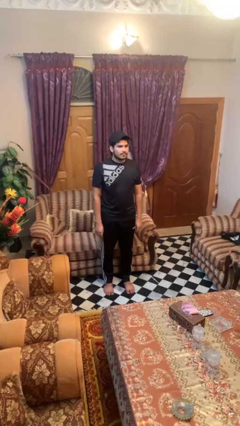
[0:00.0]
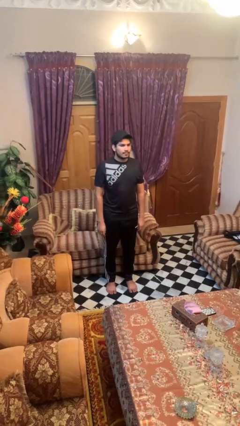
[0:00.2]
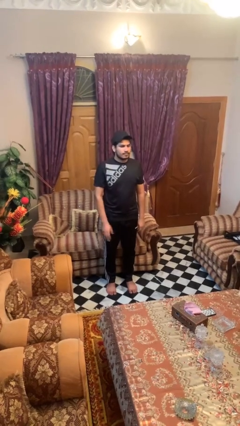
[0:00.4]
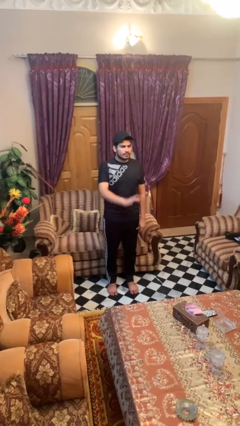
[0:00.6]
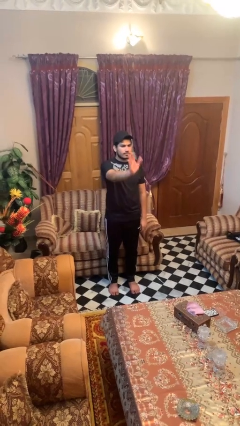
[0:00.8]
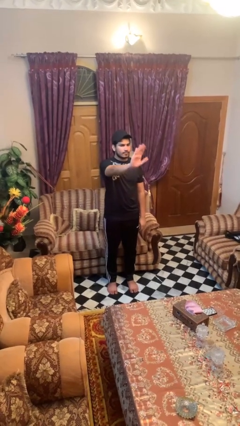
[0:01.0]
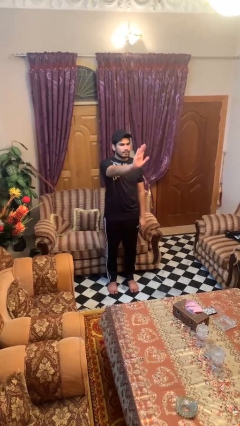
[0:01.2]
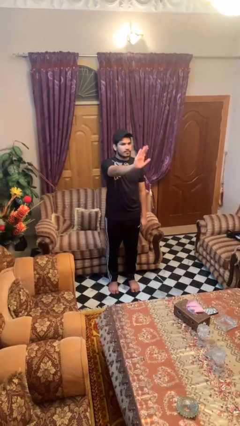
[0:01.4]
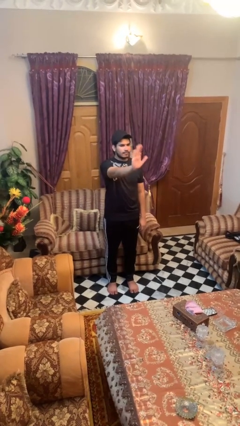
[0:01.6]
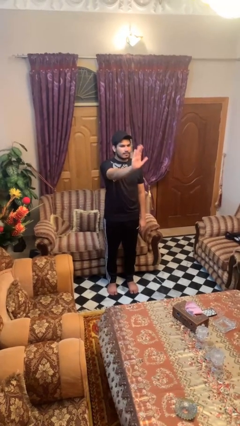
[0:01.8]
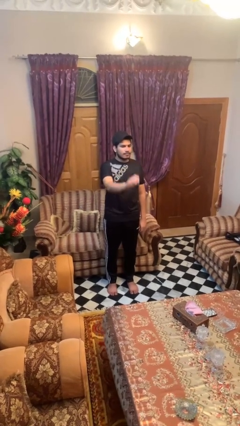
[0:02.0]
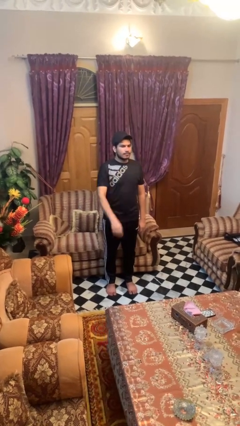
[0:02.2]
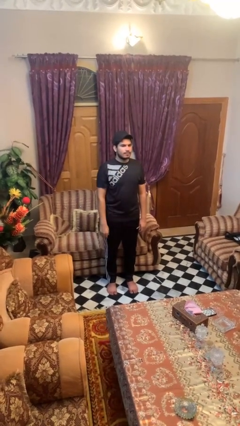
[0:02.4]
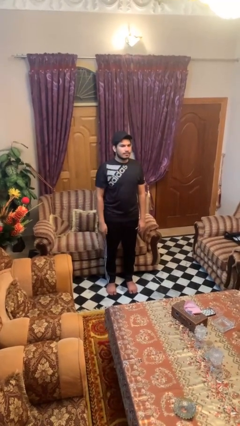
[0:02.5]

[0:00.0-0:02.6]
person waves at person

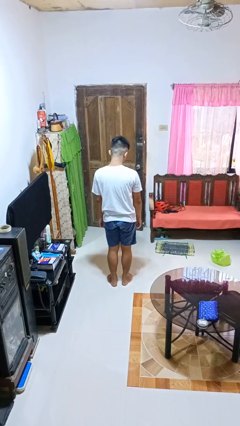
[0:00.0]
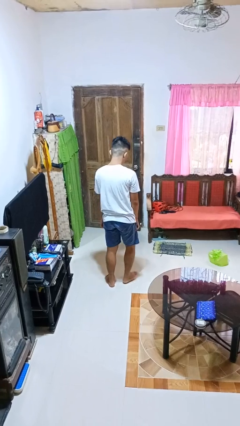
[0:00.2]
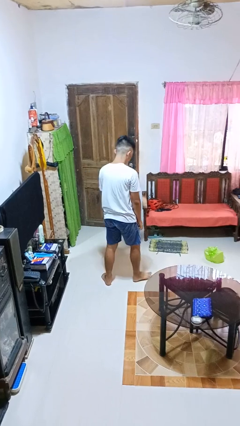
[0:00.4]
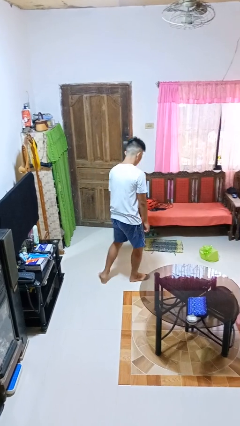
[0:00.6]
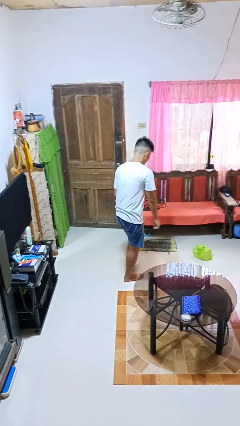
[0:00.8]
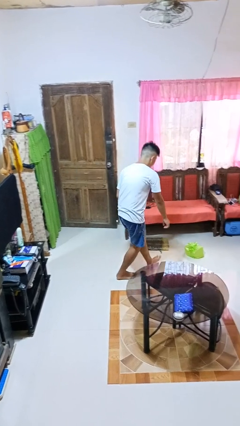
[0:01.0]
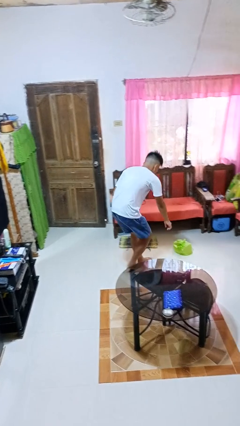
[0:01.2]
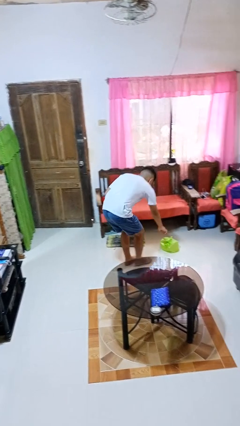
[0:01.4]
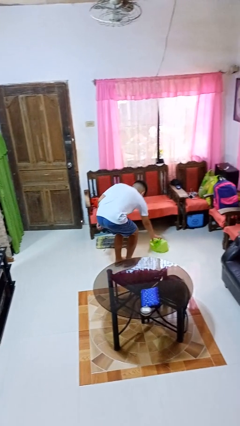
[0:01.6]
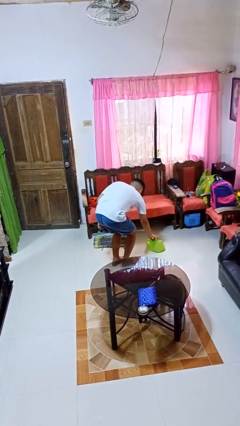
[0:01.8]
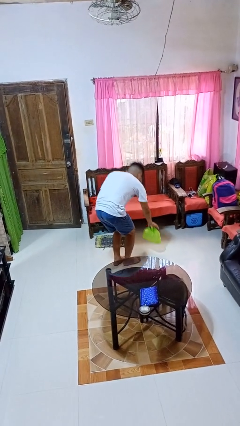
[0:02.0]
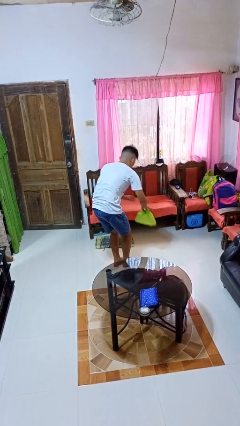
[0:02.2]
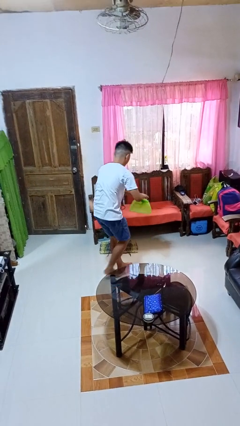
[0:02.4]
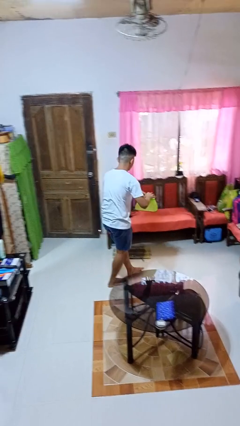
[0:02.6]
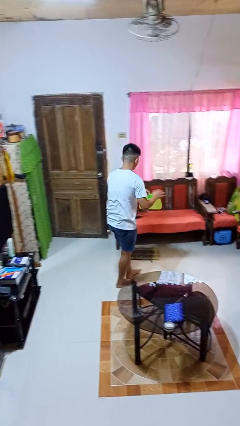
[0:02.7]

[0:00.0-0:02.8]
person picks up object from floor

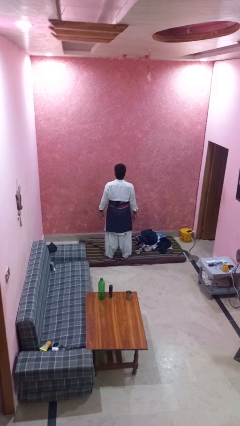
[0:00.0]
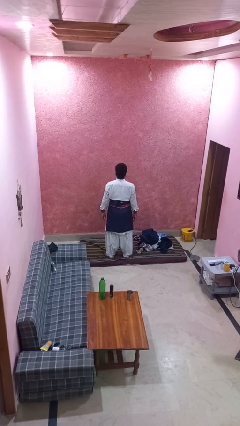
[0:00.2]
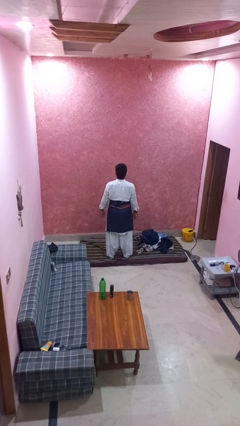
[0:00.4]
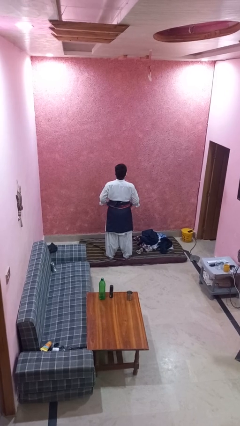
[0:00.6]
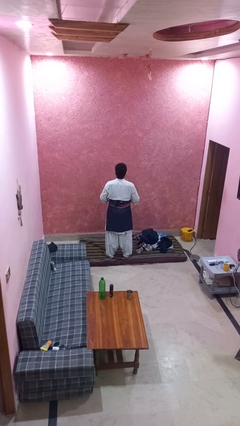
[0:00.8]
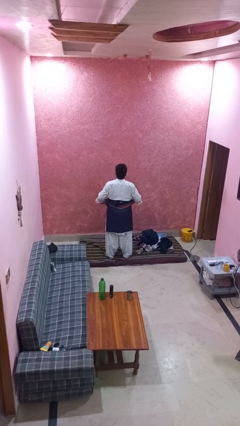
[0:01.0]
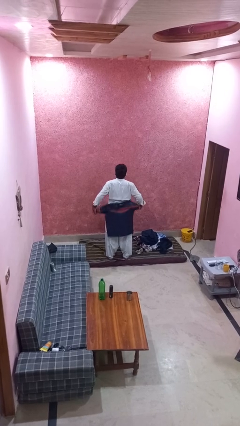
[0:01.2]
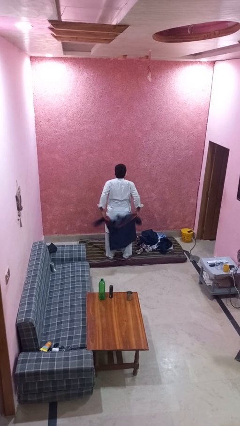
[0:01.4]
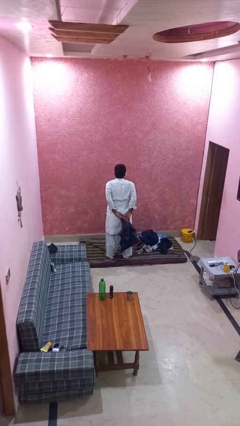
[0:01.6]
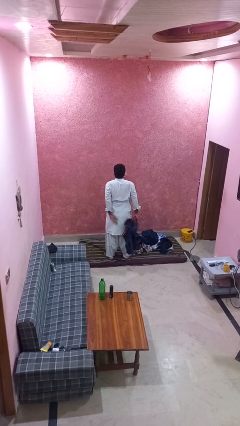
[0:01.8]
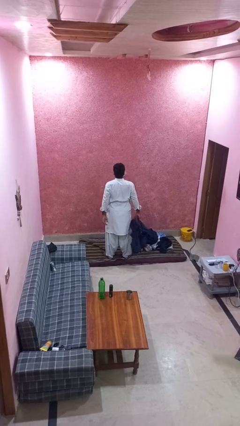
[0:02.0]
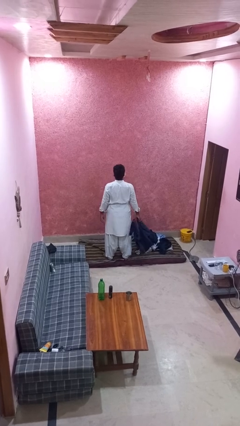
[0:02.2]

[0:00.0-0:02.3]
person unties jacket around waist

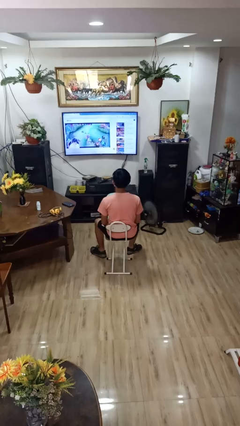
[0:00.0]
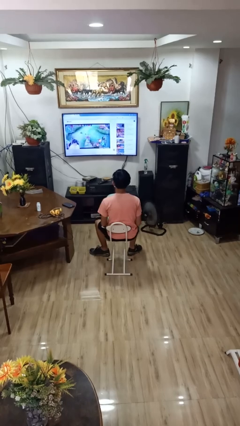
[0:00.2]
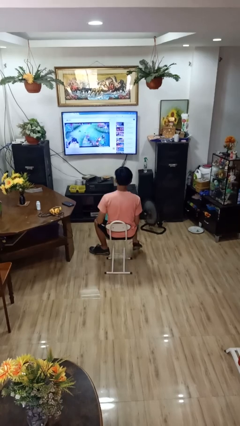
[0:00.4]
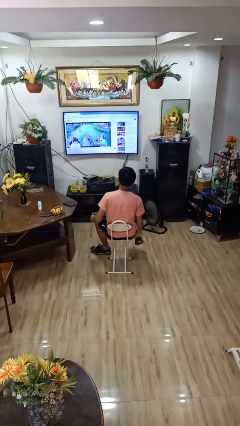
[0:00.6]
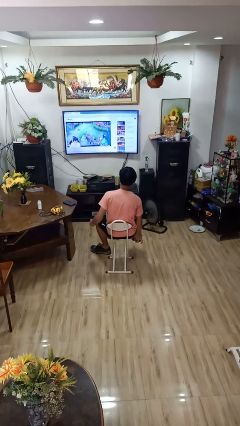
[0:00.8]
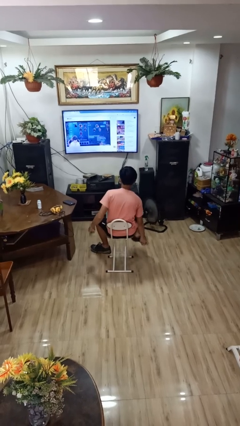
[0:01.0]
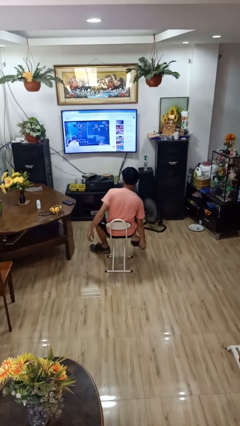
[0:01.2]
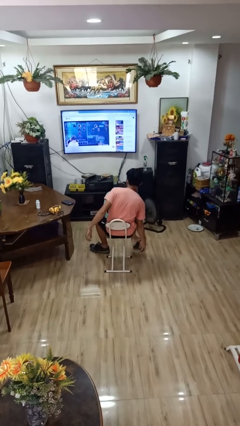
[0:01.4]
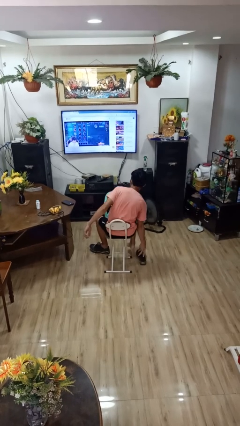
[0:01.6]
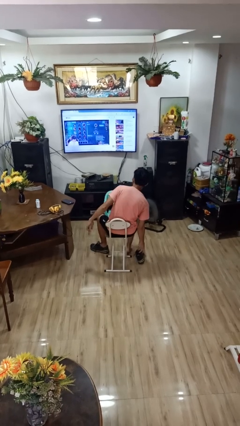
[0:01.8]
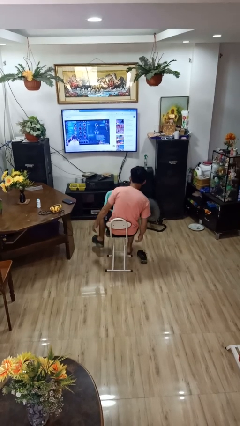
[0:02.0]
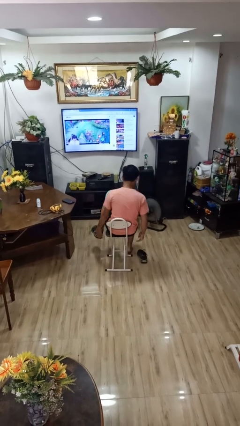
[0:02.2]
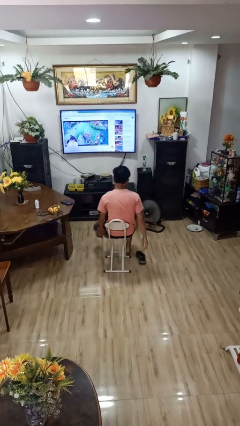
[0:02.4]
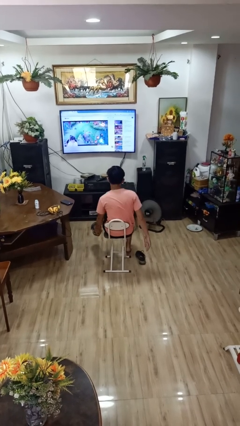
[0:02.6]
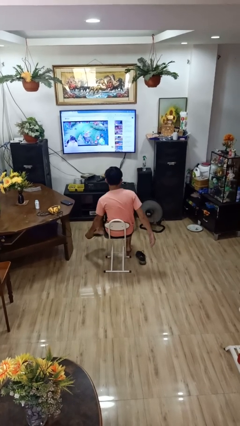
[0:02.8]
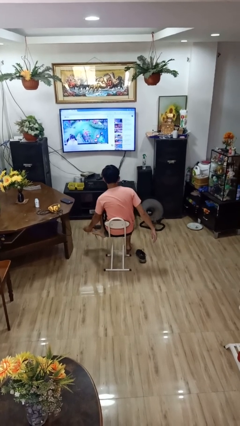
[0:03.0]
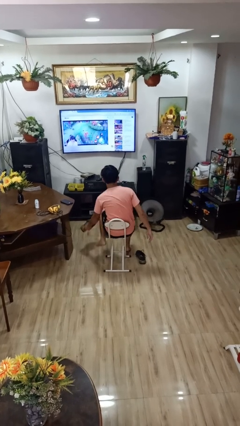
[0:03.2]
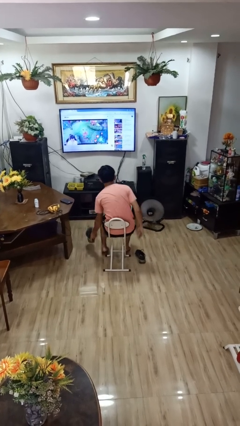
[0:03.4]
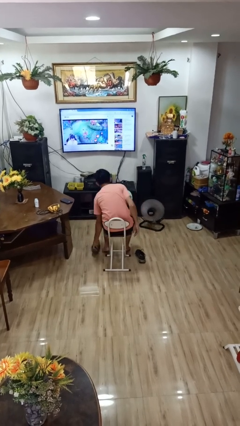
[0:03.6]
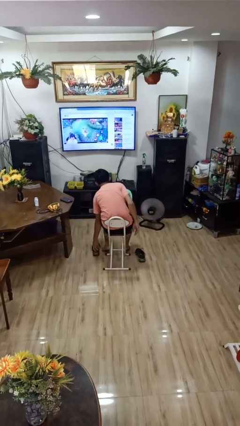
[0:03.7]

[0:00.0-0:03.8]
person takes off shoes

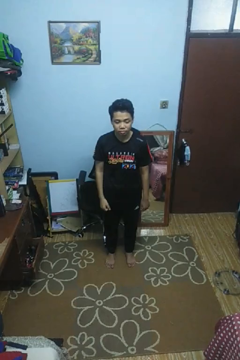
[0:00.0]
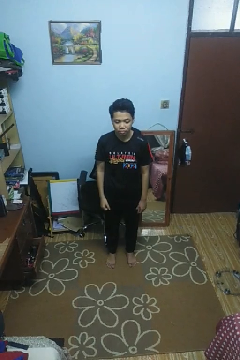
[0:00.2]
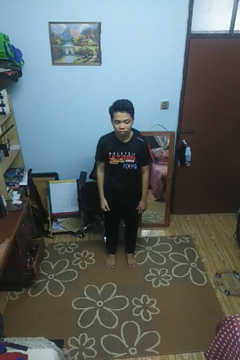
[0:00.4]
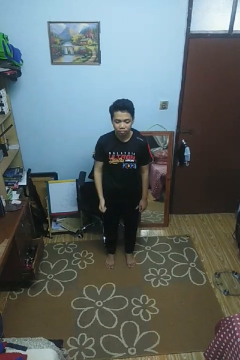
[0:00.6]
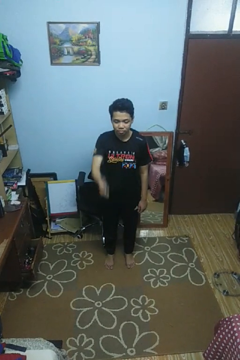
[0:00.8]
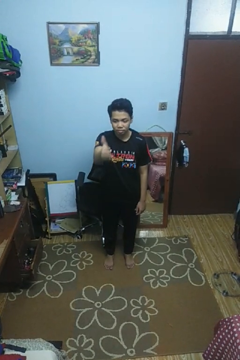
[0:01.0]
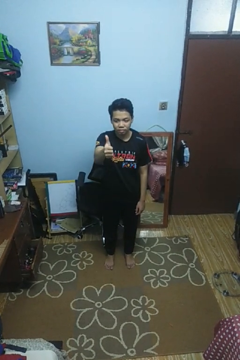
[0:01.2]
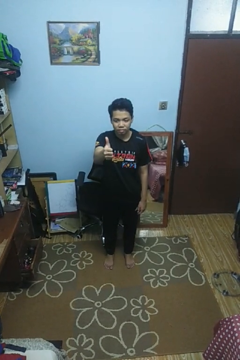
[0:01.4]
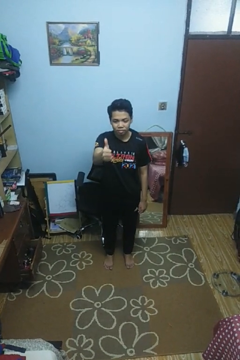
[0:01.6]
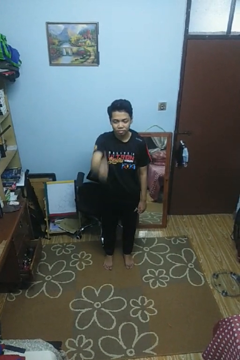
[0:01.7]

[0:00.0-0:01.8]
person gestures thumbs up

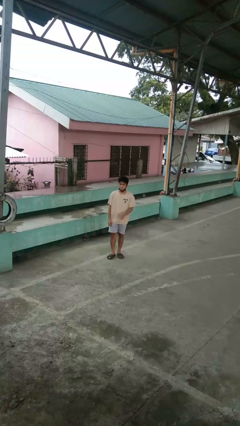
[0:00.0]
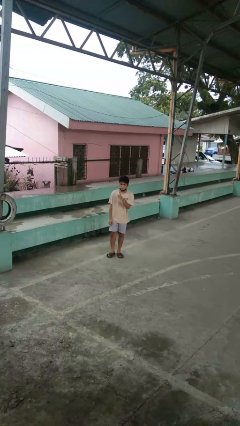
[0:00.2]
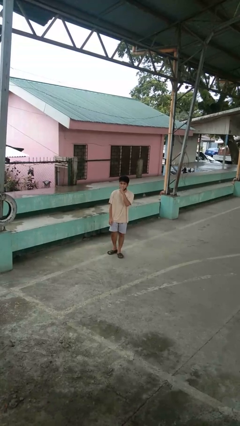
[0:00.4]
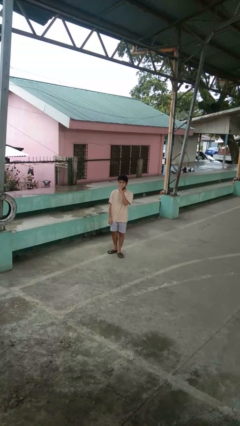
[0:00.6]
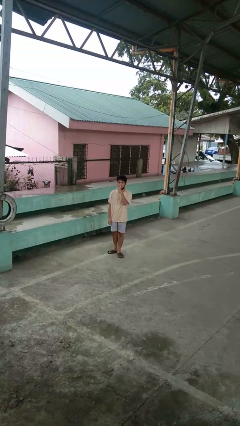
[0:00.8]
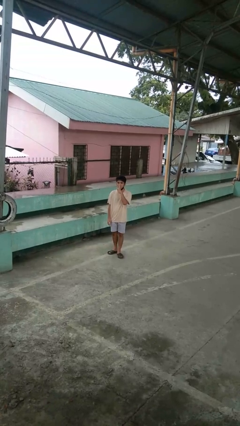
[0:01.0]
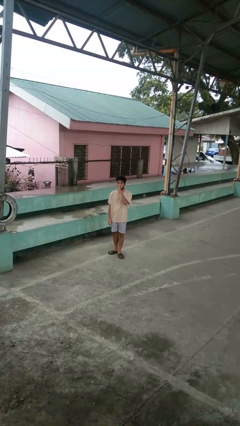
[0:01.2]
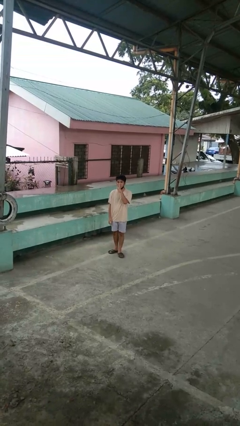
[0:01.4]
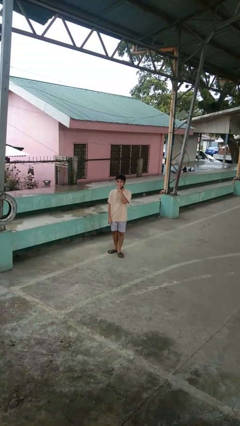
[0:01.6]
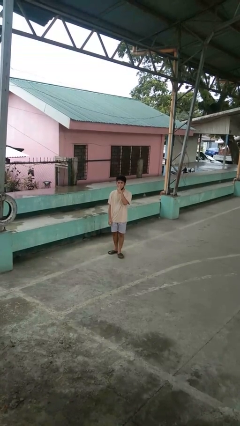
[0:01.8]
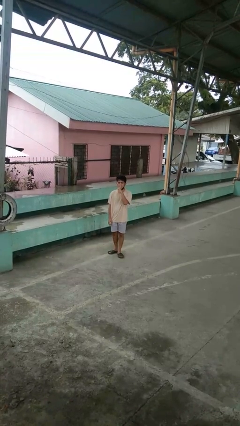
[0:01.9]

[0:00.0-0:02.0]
person gestures be quiet

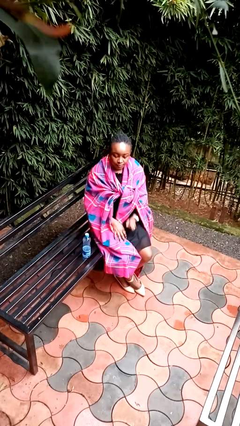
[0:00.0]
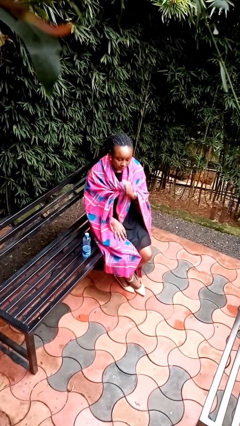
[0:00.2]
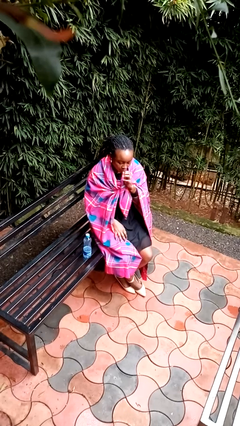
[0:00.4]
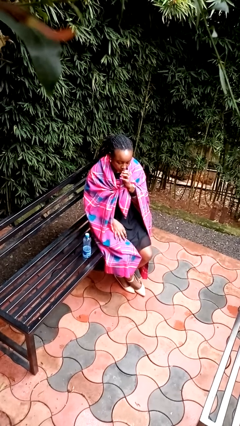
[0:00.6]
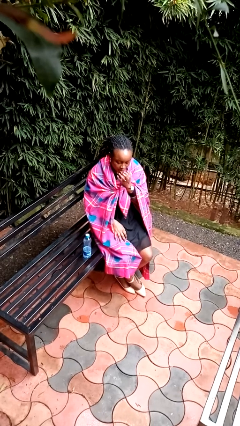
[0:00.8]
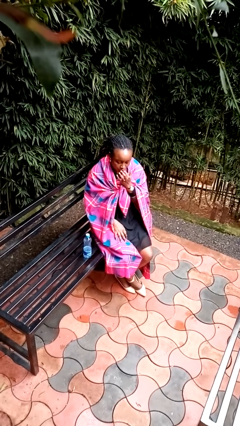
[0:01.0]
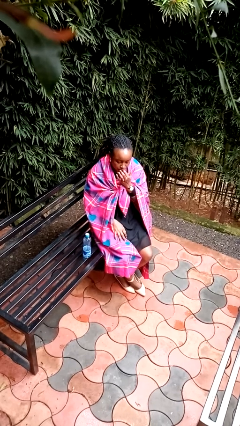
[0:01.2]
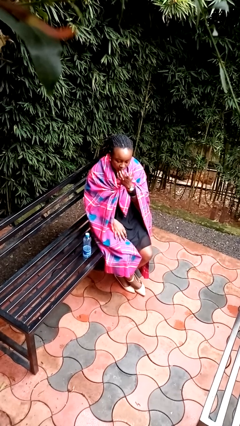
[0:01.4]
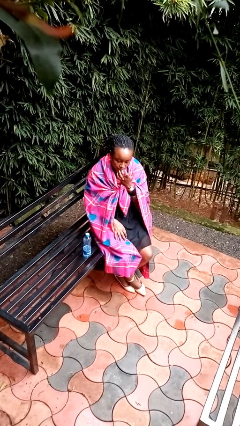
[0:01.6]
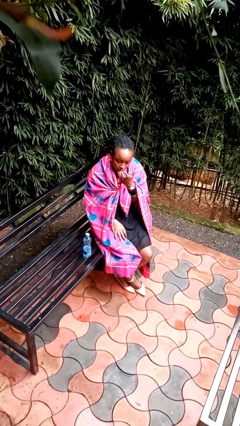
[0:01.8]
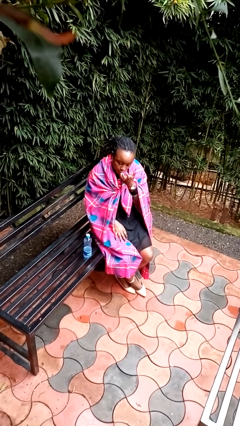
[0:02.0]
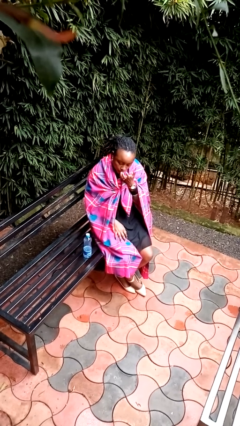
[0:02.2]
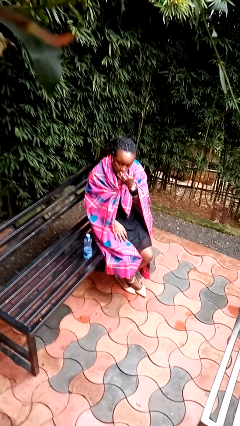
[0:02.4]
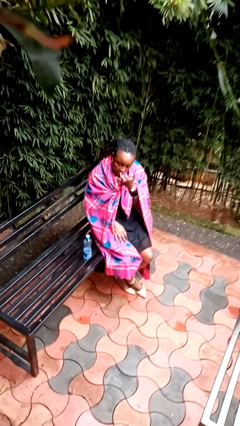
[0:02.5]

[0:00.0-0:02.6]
person licks fingers
